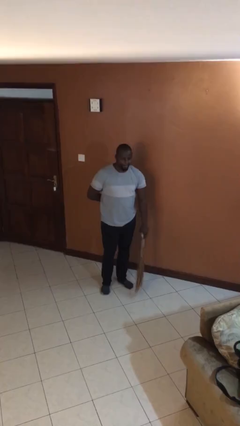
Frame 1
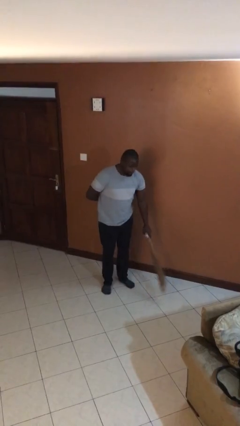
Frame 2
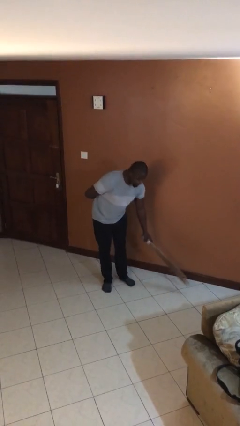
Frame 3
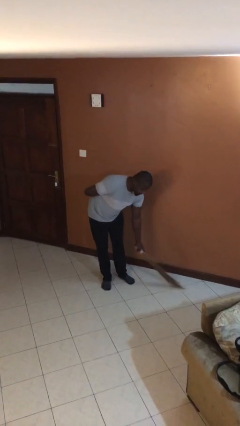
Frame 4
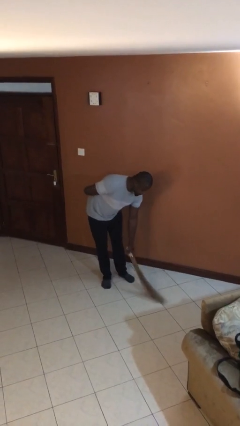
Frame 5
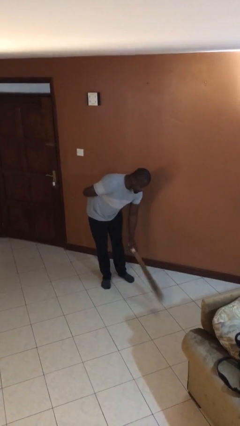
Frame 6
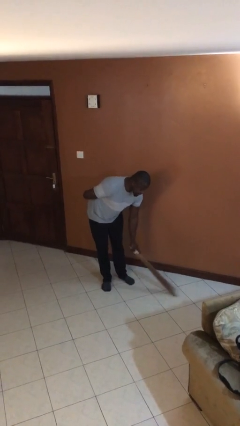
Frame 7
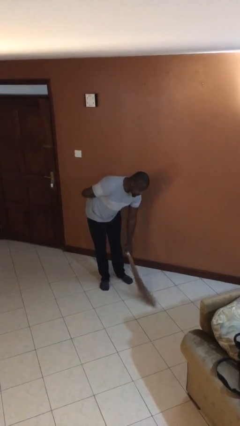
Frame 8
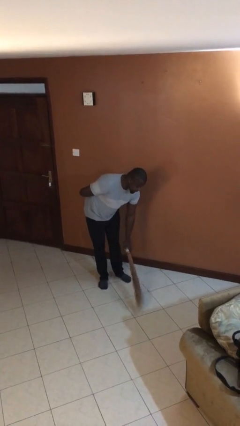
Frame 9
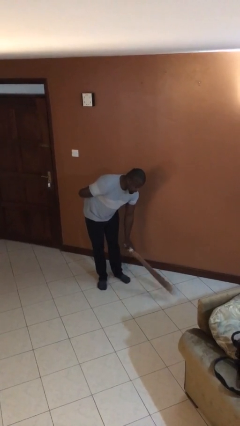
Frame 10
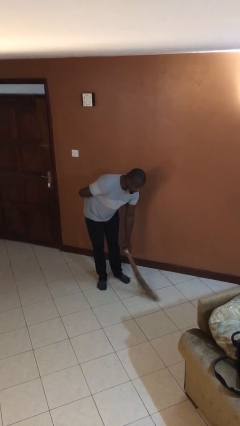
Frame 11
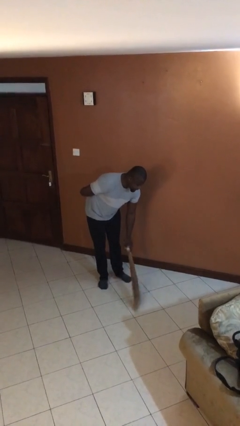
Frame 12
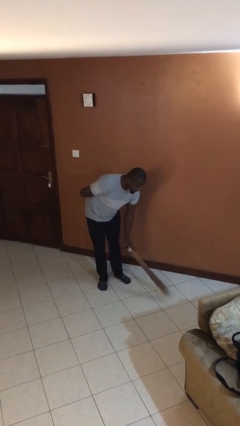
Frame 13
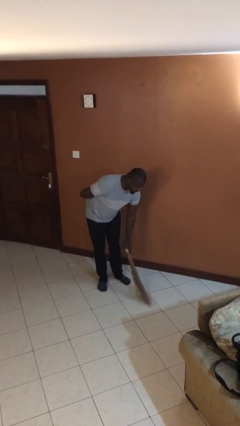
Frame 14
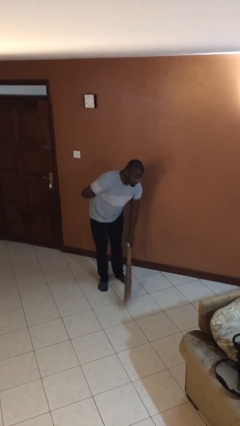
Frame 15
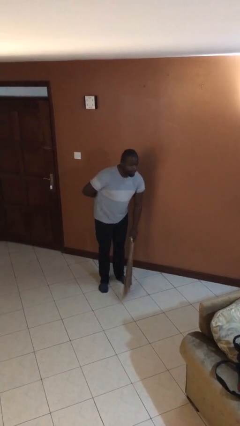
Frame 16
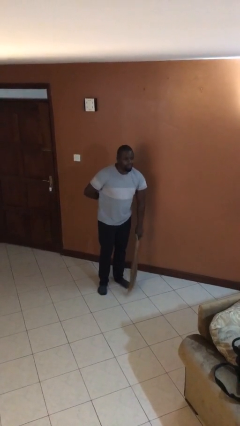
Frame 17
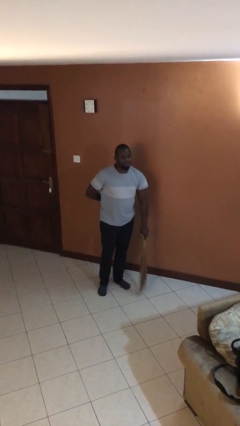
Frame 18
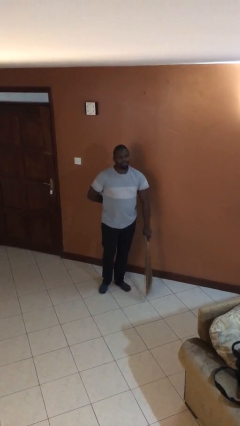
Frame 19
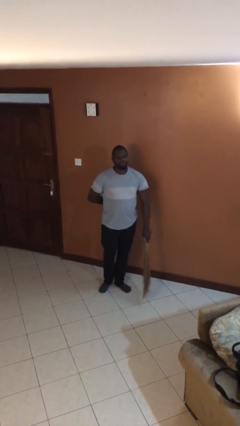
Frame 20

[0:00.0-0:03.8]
person sweeps floor

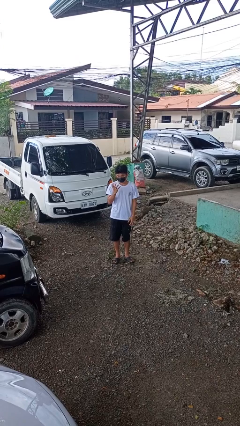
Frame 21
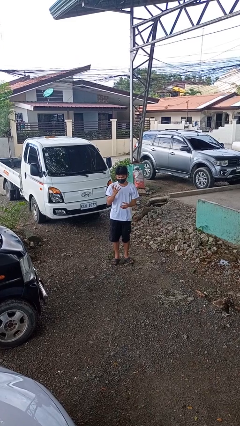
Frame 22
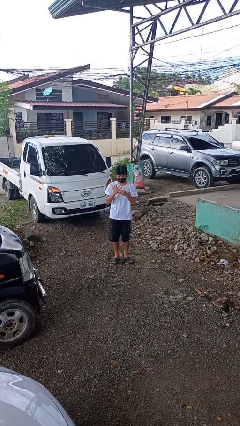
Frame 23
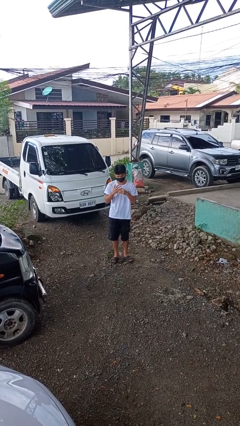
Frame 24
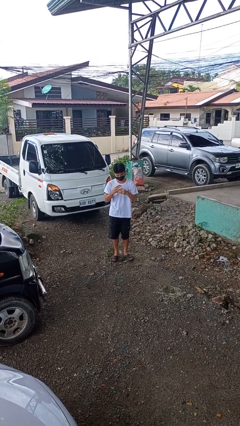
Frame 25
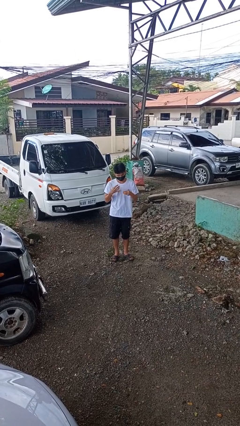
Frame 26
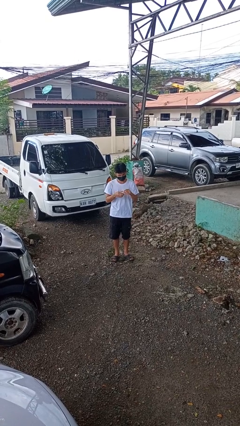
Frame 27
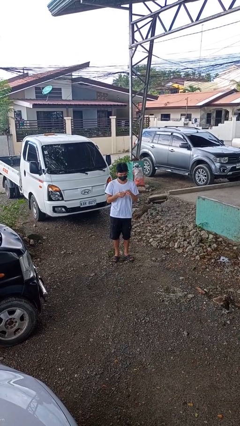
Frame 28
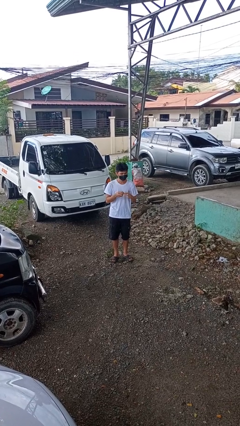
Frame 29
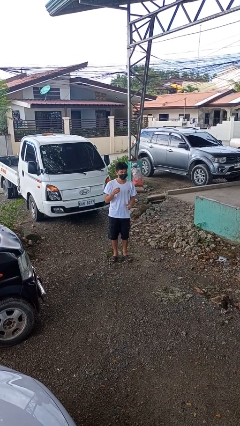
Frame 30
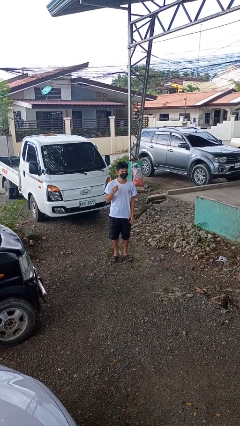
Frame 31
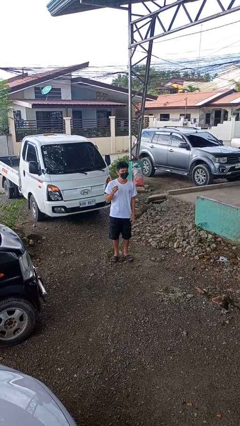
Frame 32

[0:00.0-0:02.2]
person takes off ring

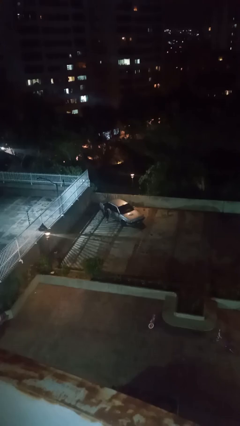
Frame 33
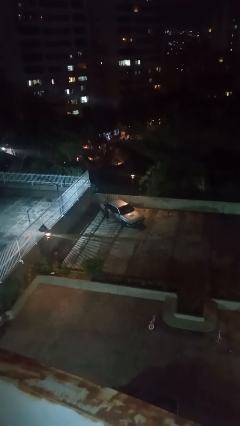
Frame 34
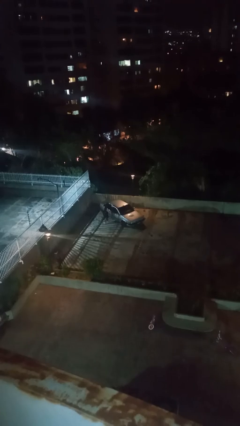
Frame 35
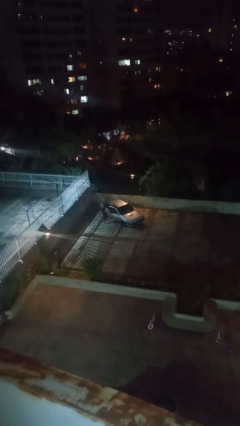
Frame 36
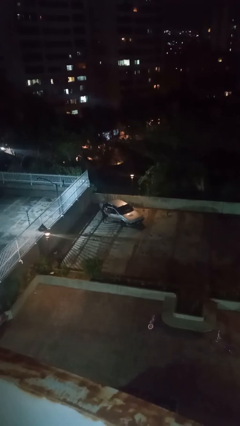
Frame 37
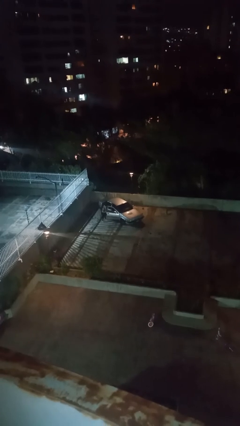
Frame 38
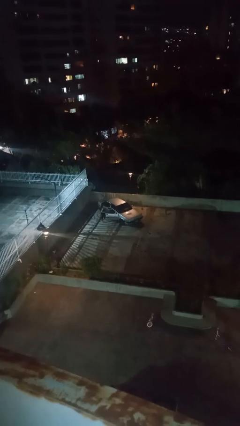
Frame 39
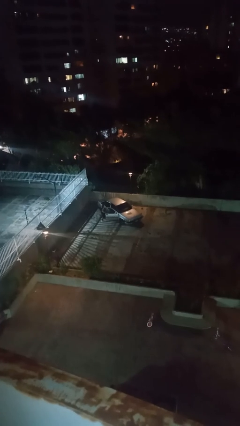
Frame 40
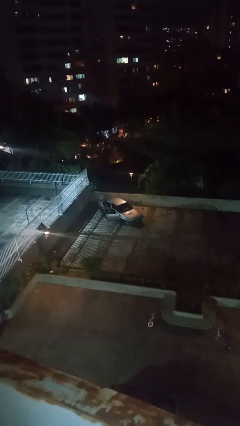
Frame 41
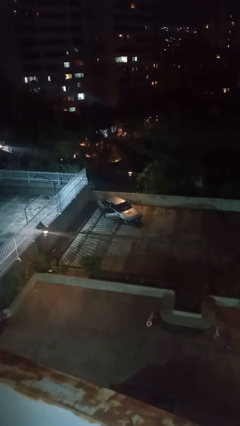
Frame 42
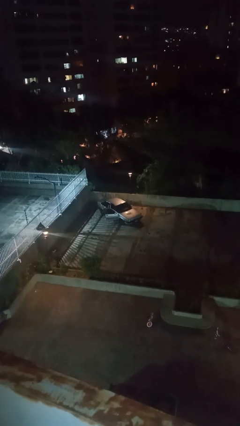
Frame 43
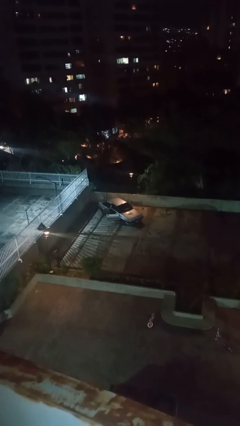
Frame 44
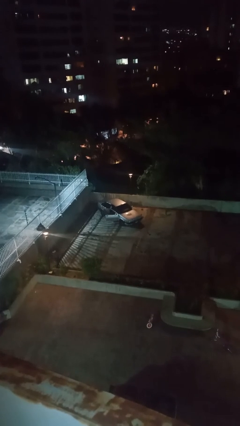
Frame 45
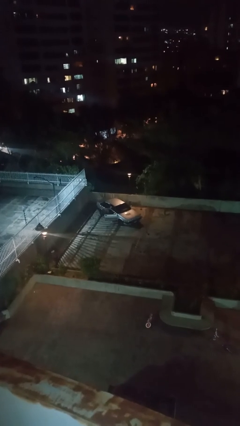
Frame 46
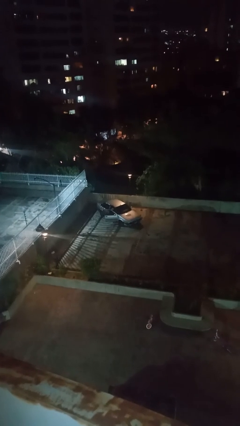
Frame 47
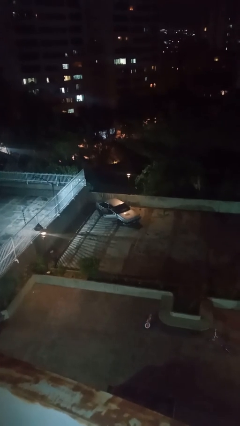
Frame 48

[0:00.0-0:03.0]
car picks up person

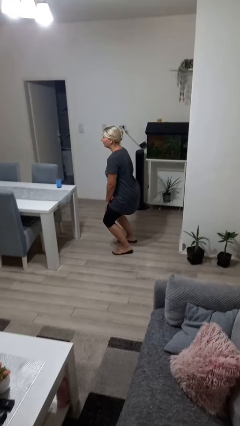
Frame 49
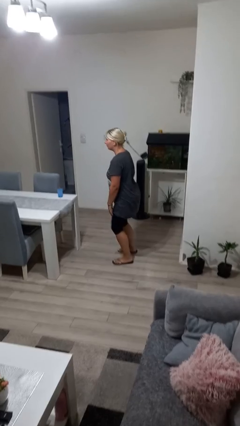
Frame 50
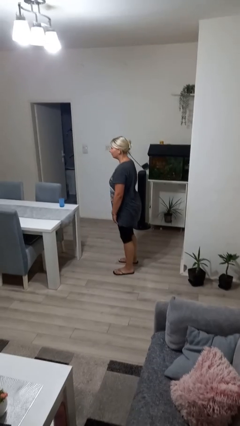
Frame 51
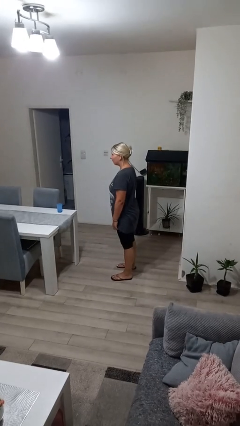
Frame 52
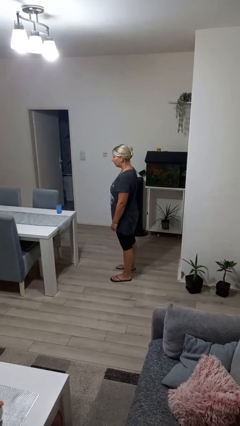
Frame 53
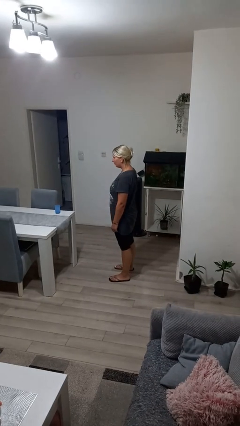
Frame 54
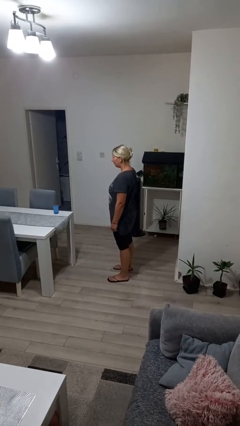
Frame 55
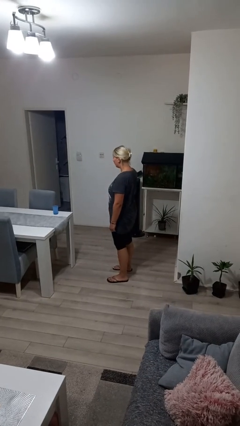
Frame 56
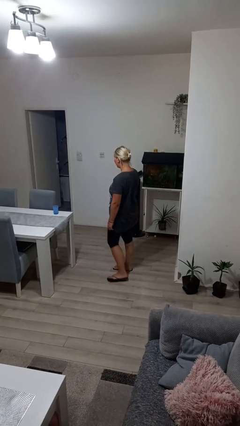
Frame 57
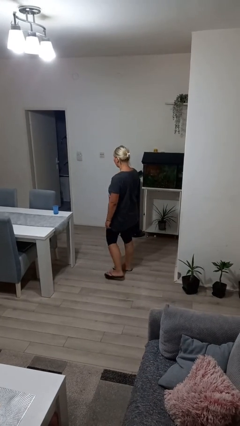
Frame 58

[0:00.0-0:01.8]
person stands up

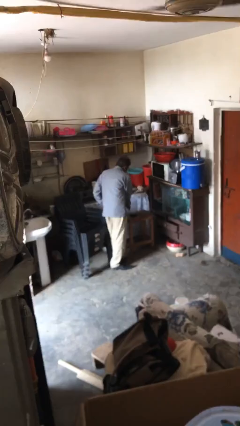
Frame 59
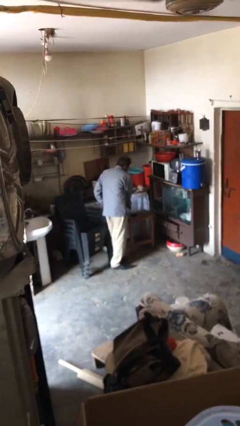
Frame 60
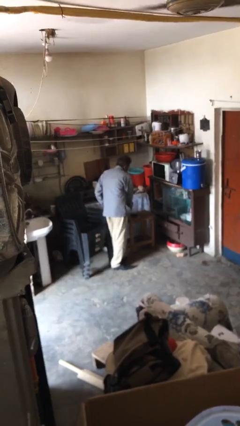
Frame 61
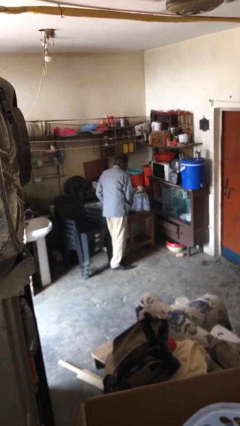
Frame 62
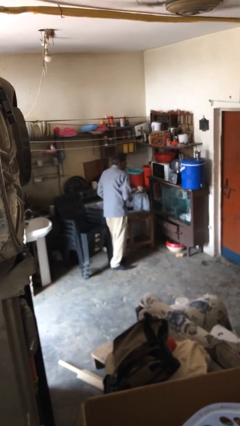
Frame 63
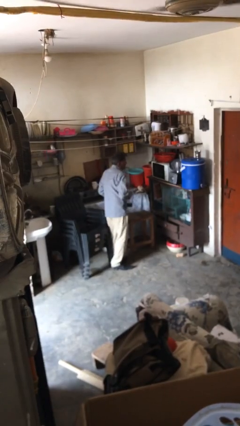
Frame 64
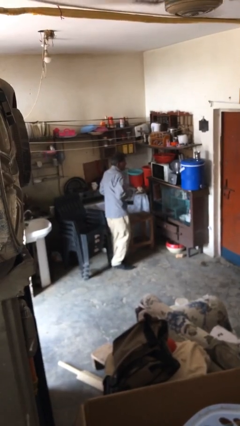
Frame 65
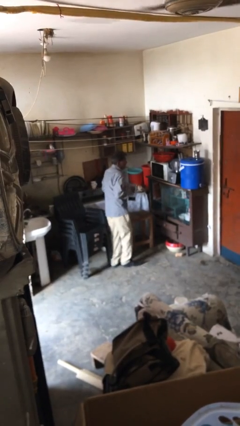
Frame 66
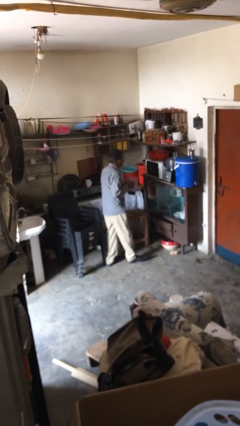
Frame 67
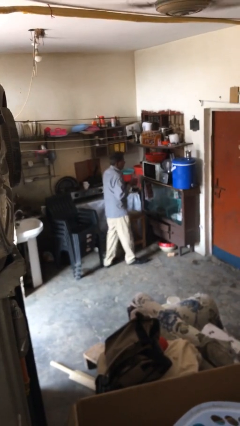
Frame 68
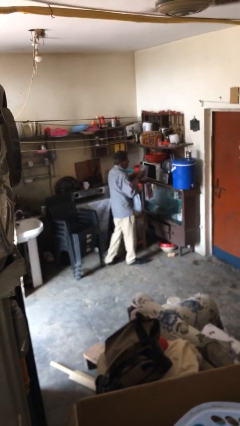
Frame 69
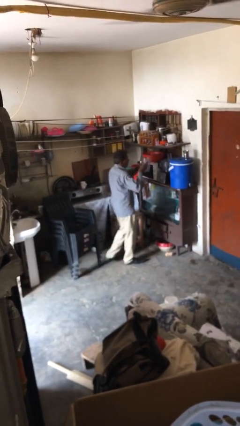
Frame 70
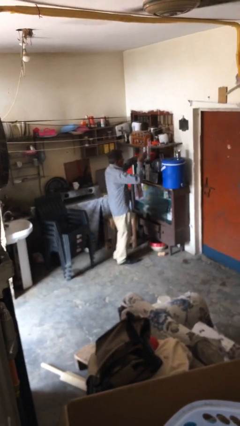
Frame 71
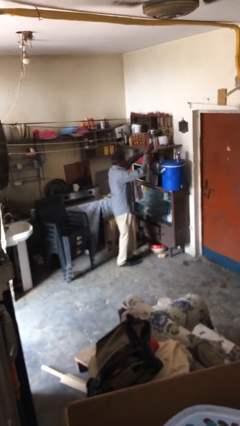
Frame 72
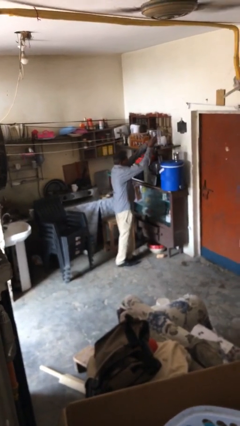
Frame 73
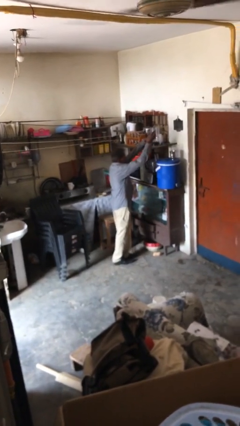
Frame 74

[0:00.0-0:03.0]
person picks up object from table

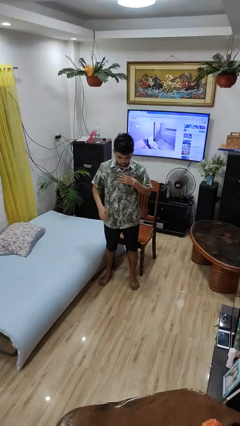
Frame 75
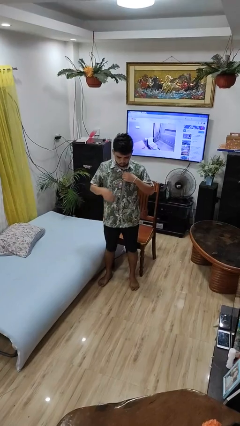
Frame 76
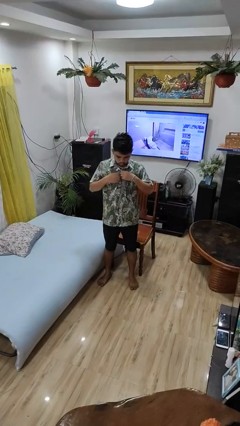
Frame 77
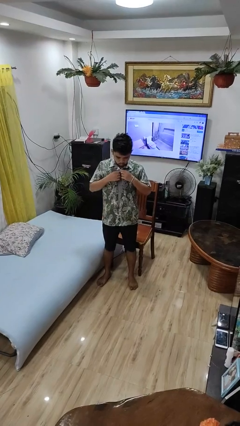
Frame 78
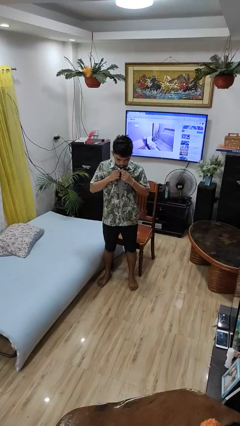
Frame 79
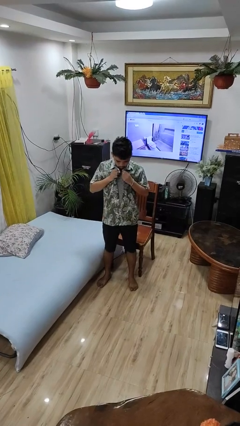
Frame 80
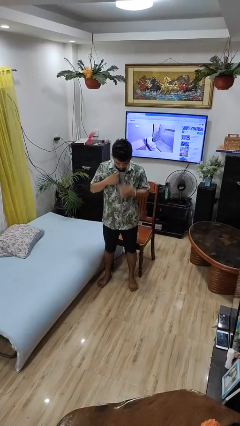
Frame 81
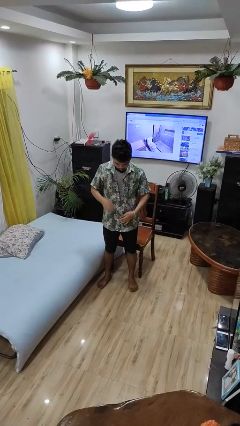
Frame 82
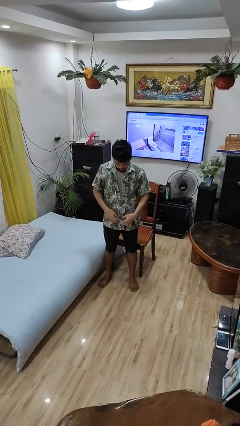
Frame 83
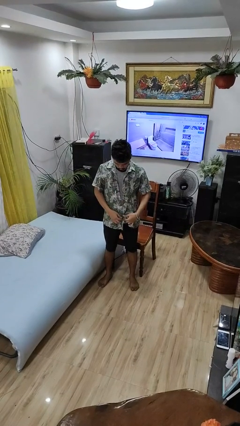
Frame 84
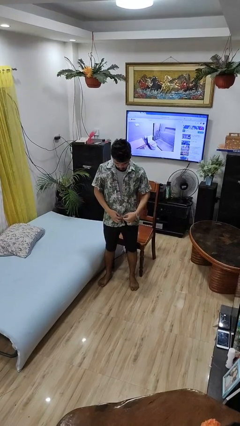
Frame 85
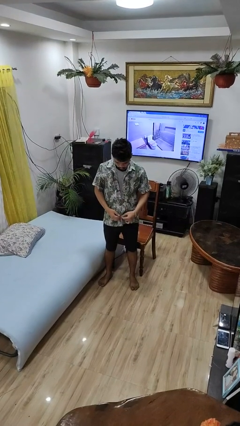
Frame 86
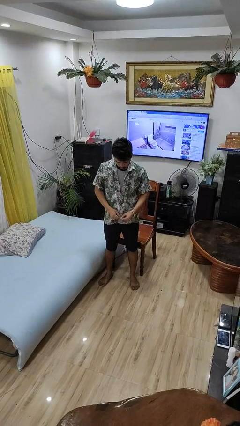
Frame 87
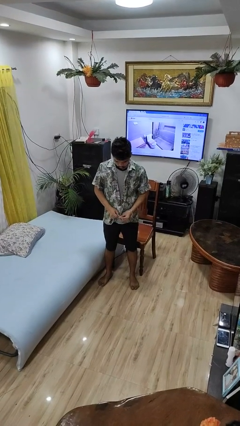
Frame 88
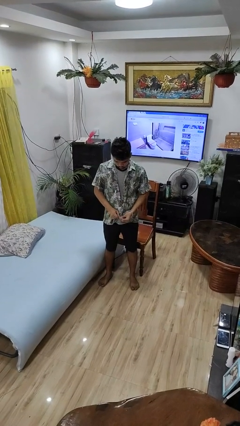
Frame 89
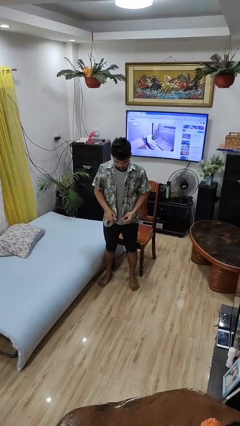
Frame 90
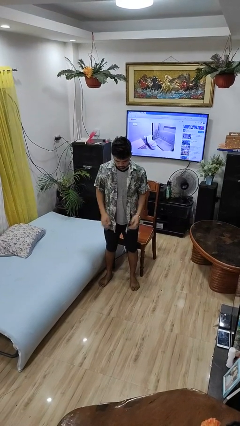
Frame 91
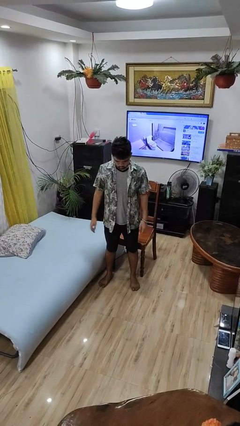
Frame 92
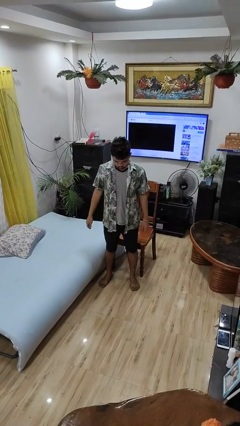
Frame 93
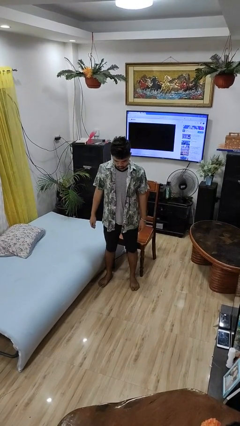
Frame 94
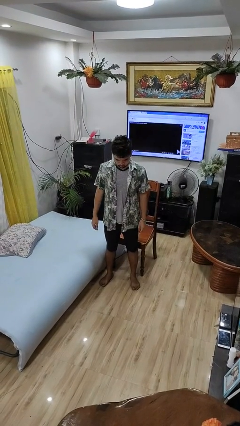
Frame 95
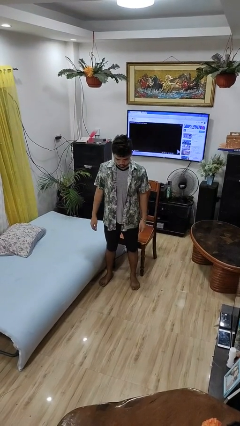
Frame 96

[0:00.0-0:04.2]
person unbuttons shirt
